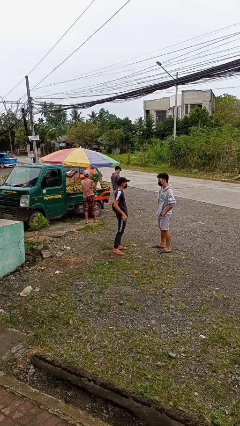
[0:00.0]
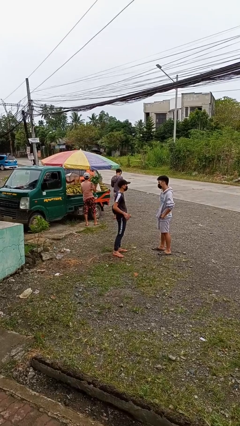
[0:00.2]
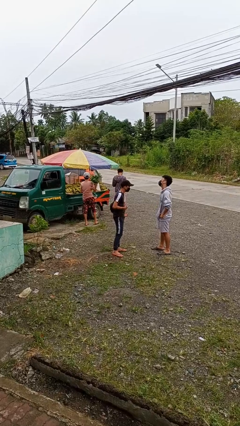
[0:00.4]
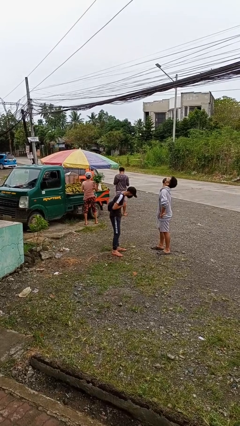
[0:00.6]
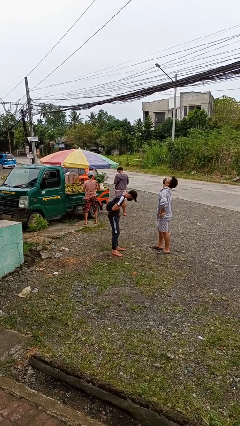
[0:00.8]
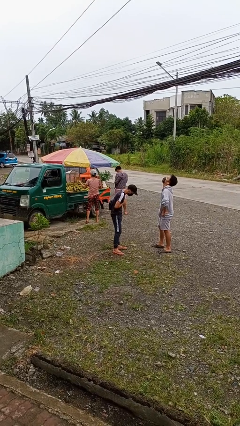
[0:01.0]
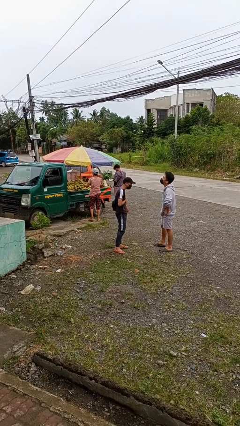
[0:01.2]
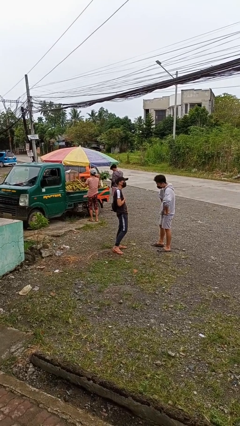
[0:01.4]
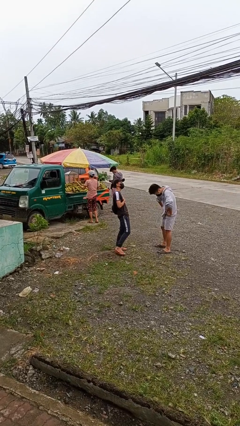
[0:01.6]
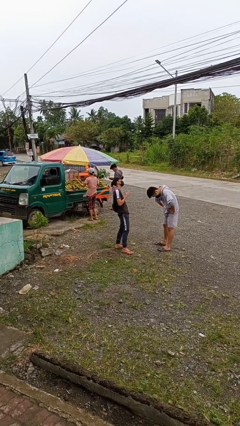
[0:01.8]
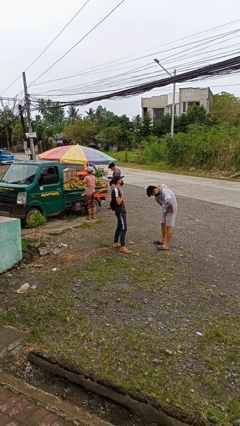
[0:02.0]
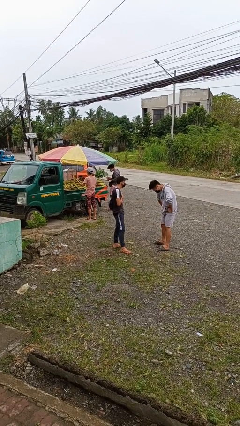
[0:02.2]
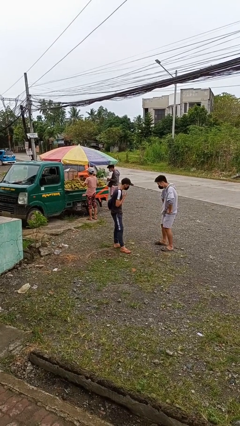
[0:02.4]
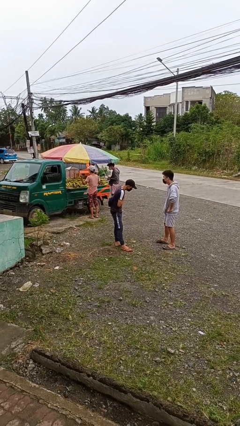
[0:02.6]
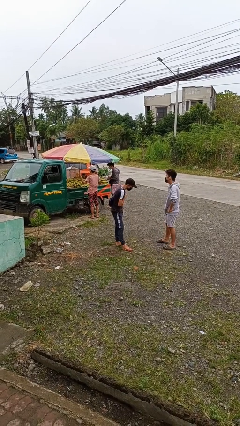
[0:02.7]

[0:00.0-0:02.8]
person laughs with person

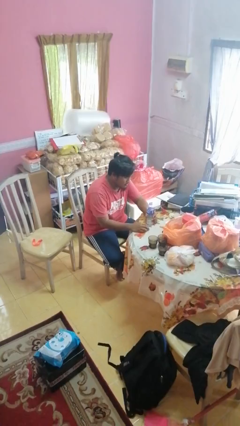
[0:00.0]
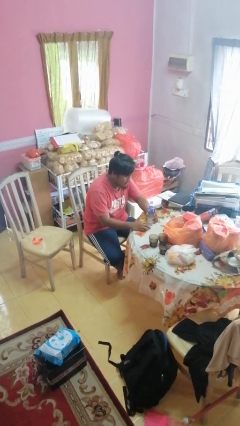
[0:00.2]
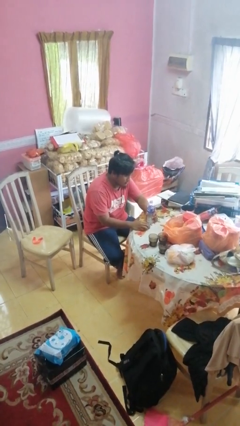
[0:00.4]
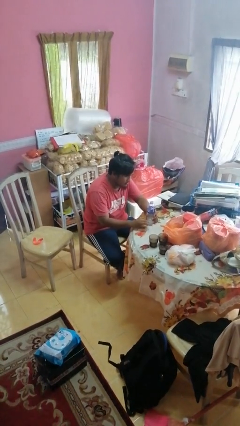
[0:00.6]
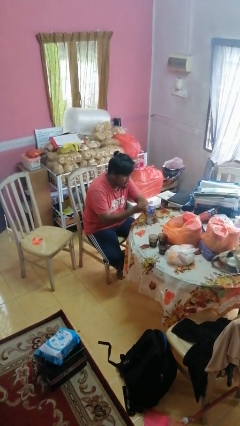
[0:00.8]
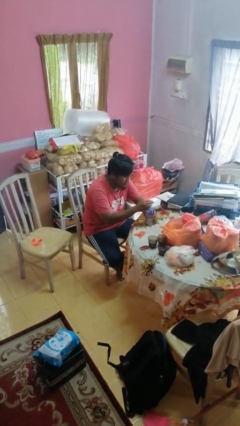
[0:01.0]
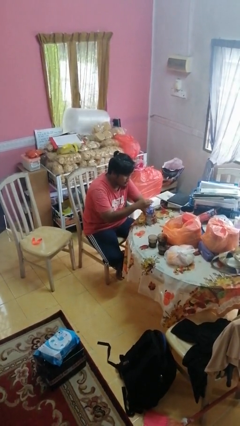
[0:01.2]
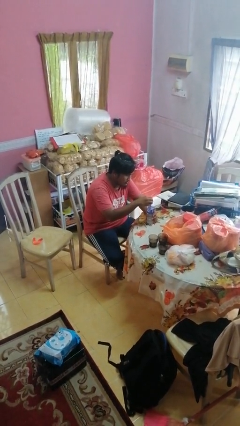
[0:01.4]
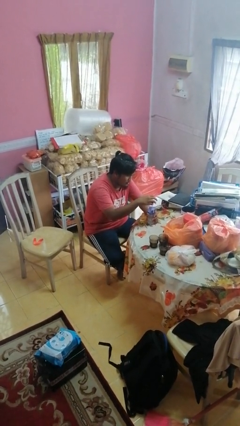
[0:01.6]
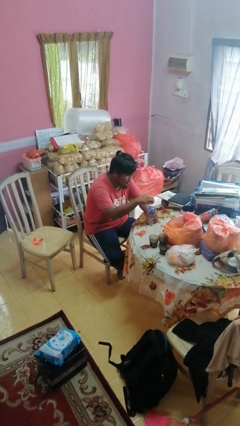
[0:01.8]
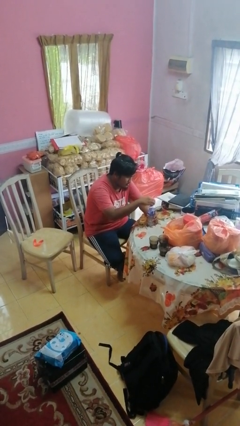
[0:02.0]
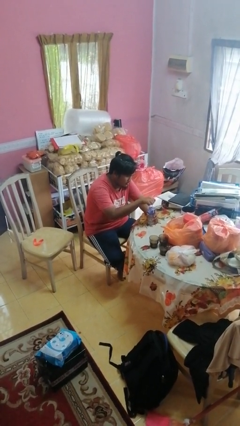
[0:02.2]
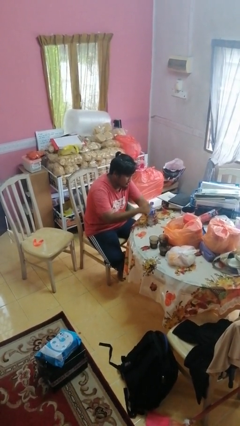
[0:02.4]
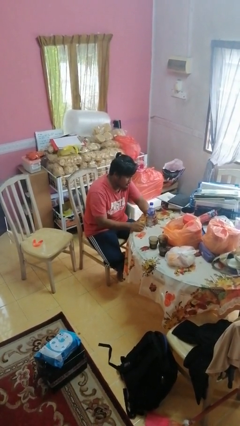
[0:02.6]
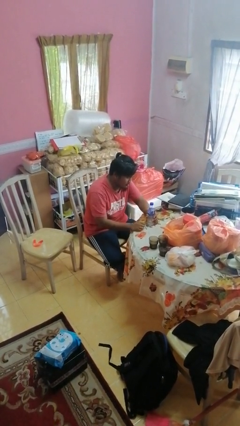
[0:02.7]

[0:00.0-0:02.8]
person screws lid to bottle

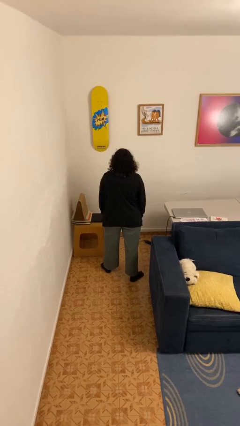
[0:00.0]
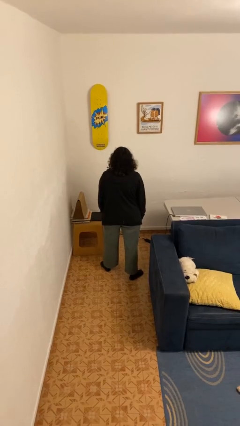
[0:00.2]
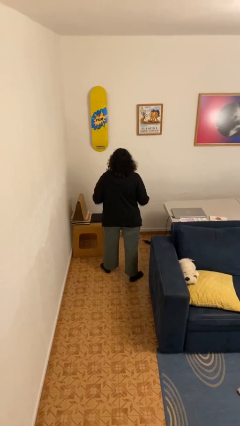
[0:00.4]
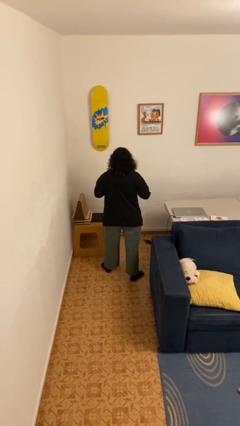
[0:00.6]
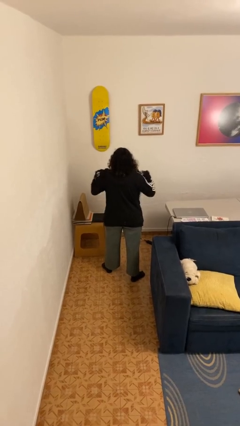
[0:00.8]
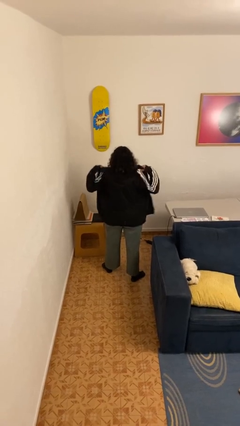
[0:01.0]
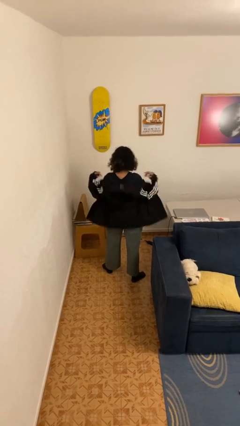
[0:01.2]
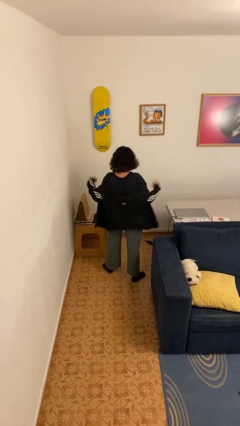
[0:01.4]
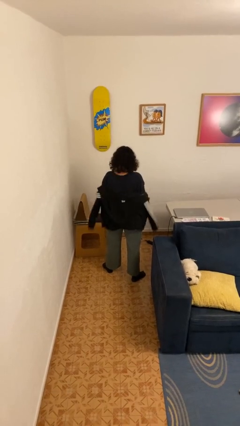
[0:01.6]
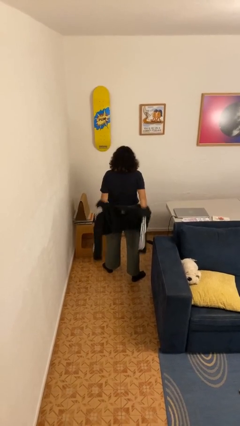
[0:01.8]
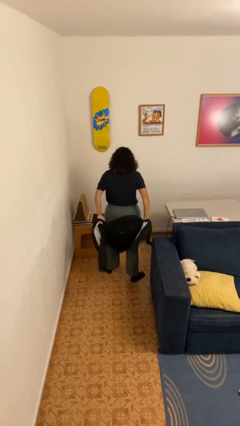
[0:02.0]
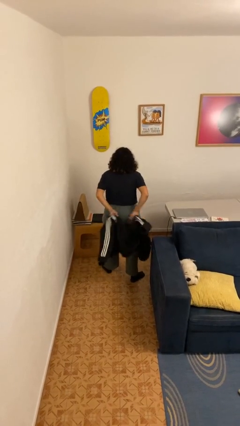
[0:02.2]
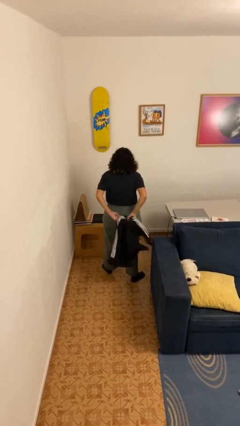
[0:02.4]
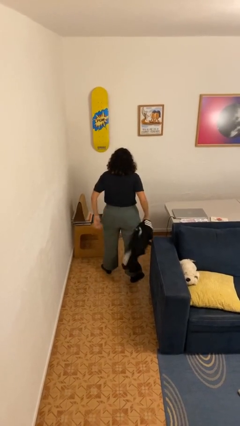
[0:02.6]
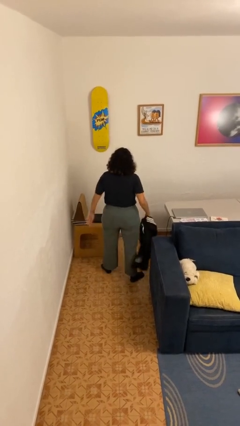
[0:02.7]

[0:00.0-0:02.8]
person takes off hoodie

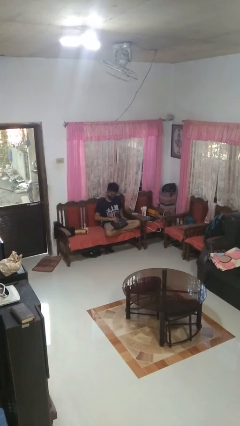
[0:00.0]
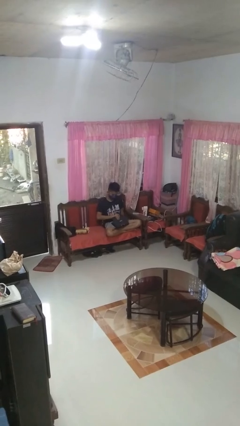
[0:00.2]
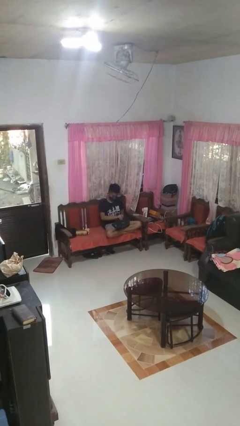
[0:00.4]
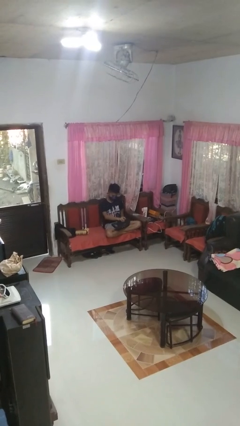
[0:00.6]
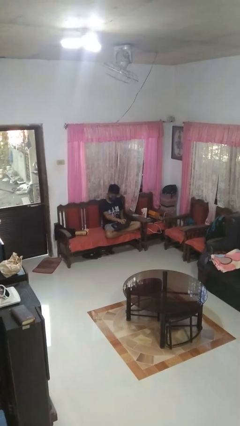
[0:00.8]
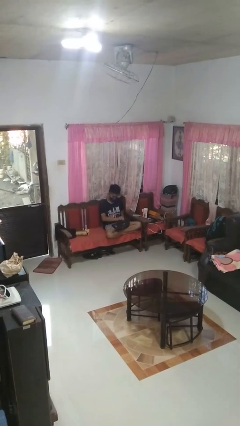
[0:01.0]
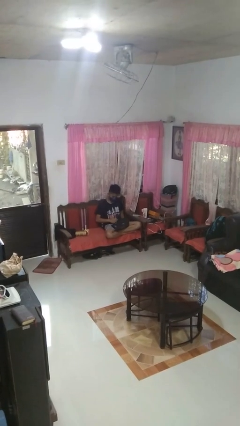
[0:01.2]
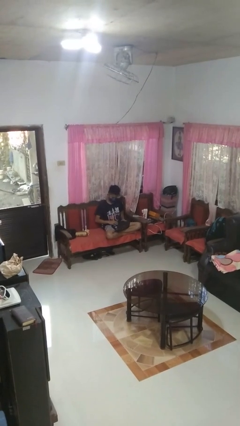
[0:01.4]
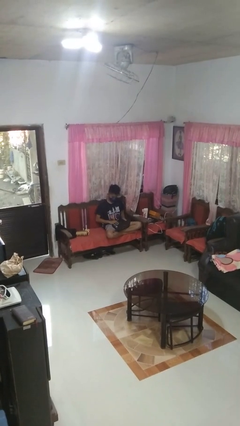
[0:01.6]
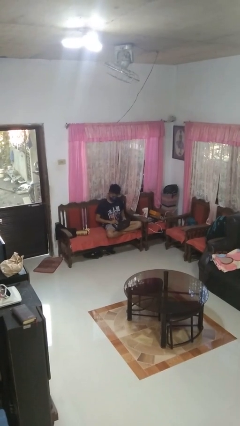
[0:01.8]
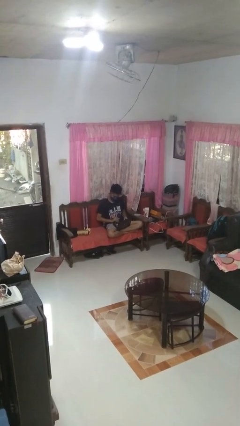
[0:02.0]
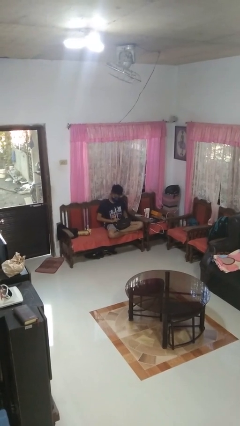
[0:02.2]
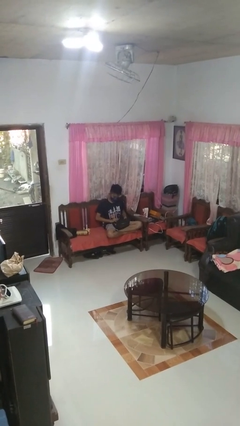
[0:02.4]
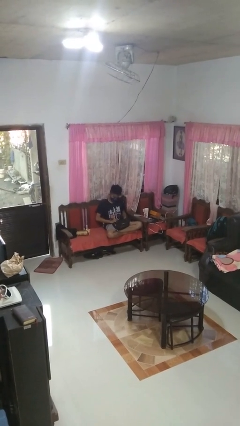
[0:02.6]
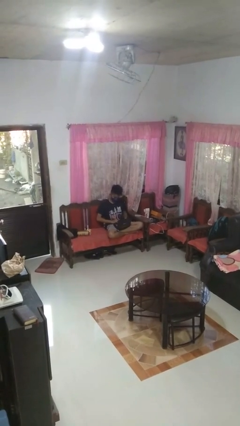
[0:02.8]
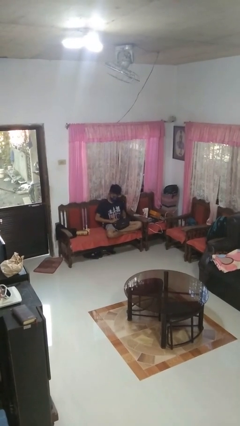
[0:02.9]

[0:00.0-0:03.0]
person opens laptop

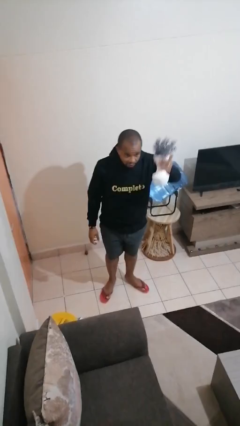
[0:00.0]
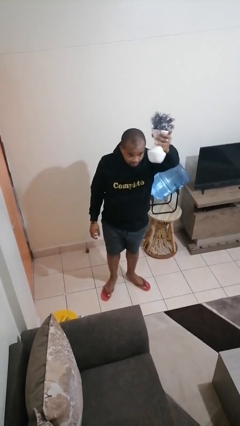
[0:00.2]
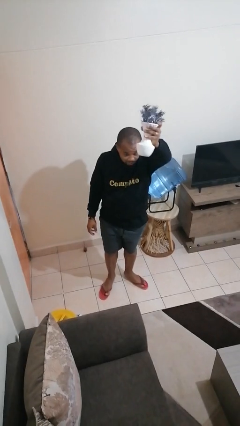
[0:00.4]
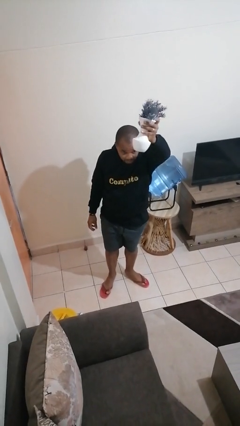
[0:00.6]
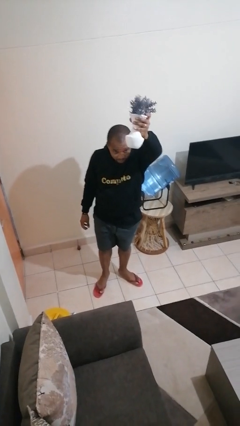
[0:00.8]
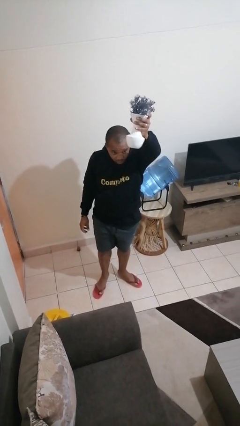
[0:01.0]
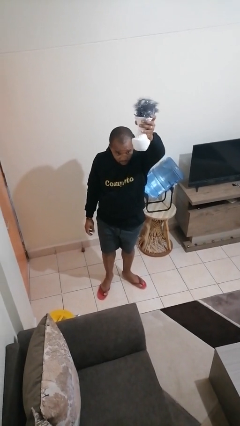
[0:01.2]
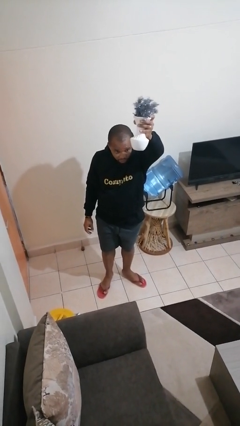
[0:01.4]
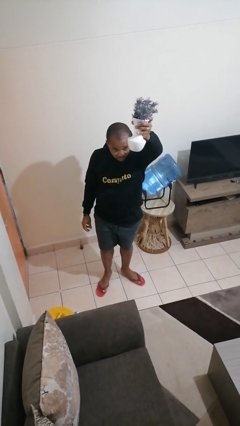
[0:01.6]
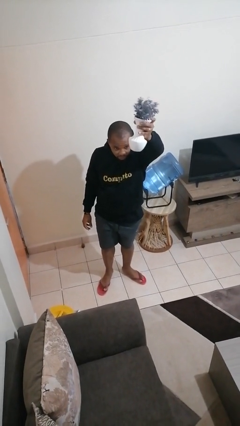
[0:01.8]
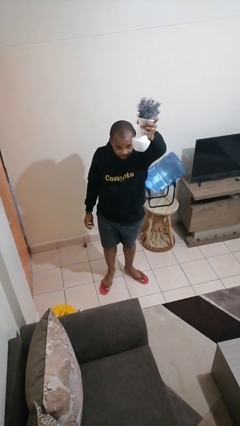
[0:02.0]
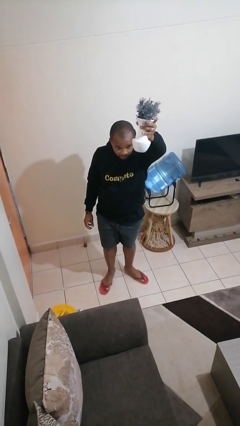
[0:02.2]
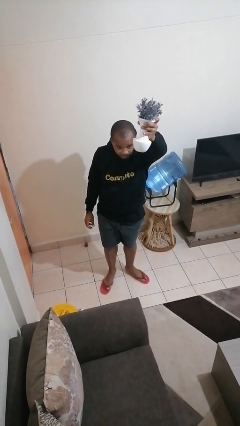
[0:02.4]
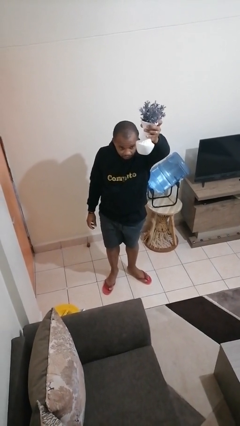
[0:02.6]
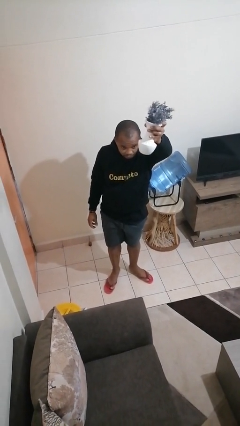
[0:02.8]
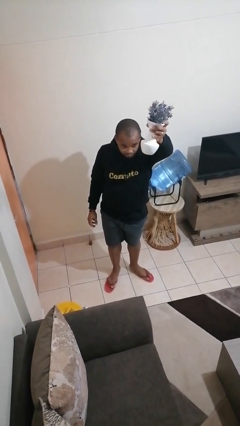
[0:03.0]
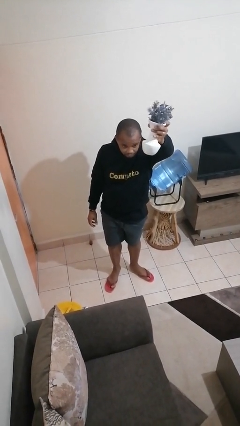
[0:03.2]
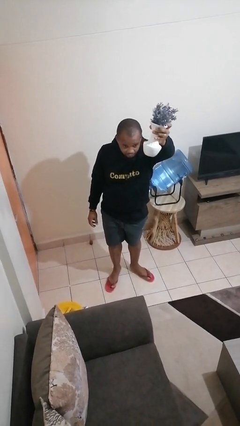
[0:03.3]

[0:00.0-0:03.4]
person holds object above head

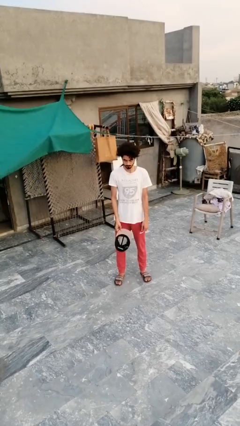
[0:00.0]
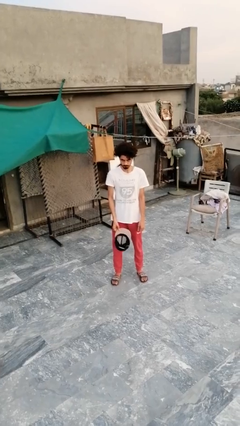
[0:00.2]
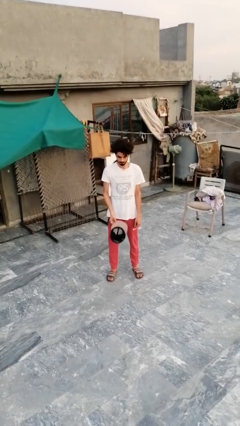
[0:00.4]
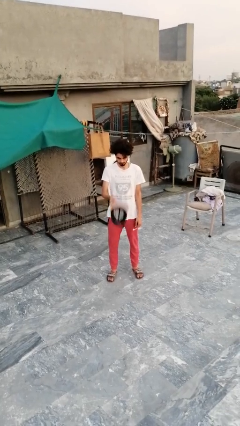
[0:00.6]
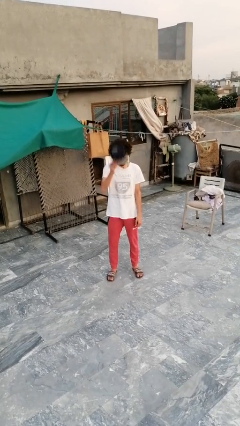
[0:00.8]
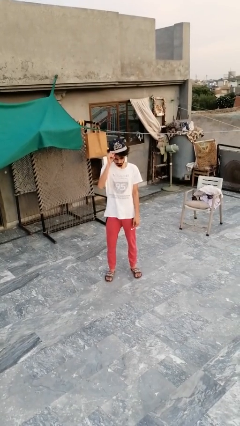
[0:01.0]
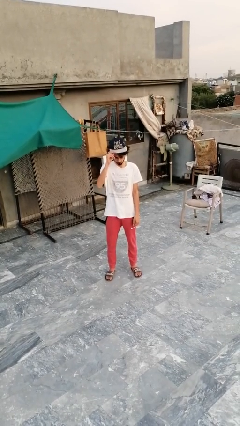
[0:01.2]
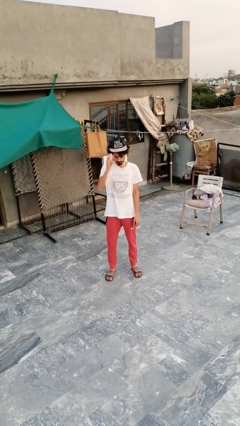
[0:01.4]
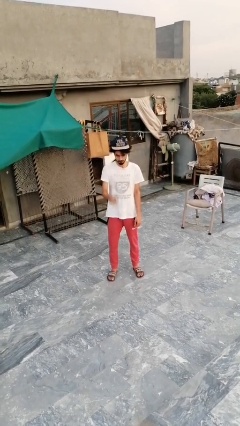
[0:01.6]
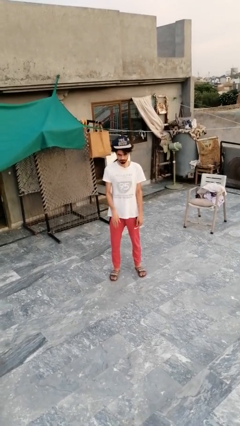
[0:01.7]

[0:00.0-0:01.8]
person puts on hat

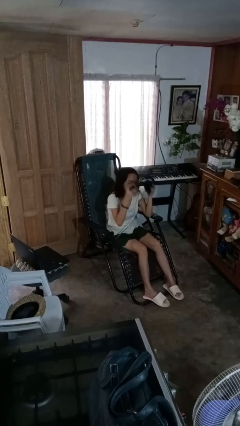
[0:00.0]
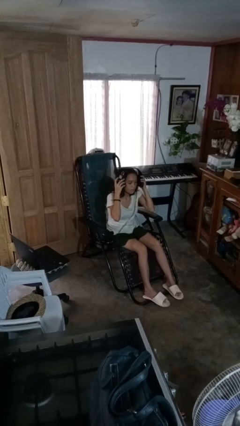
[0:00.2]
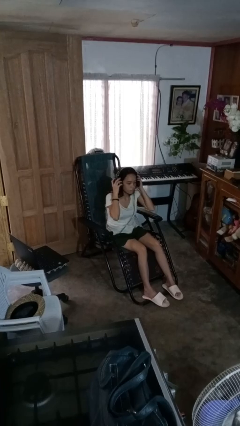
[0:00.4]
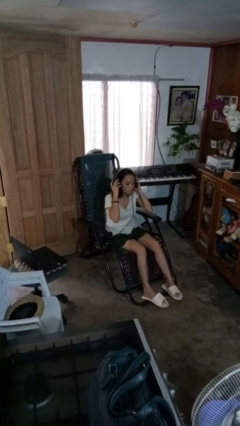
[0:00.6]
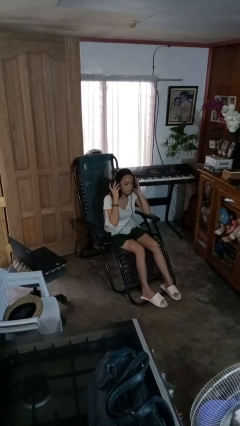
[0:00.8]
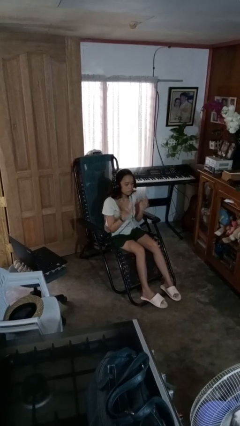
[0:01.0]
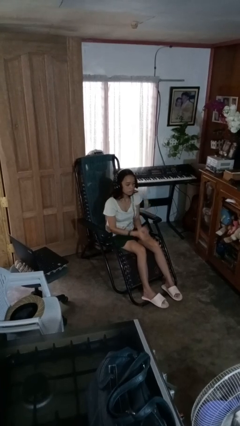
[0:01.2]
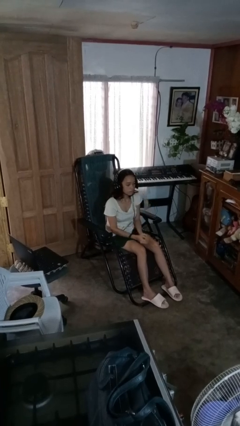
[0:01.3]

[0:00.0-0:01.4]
person puts on headphones
